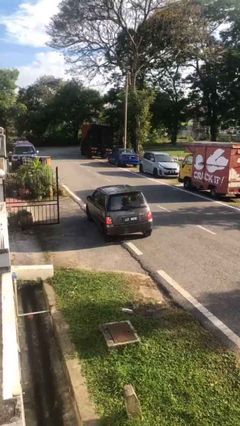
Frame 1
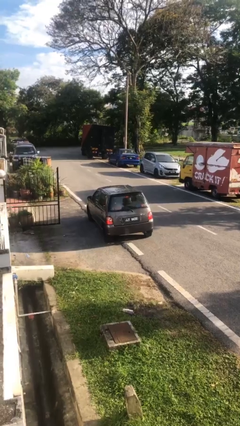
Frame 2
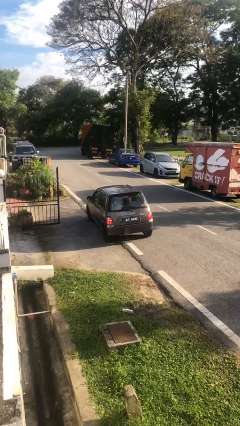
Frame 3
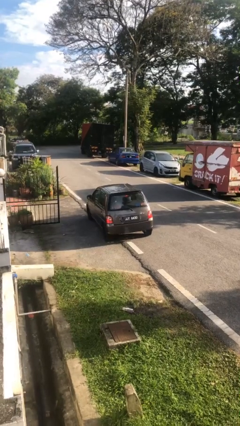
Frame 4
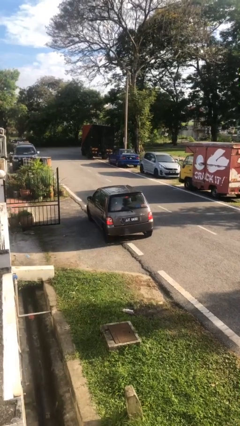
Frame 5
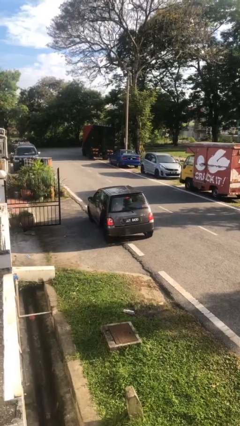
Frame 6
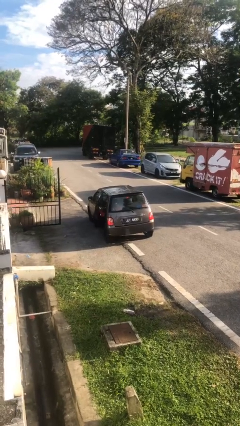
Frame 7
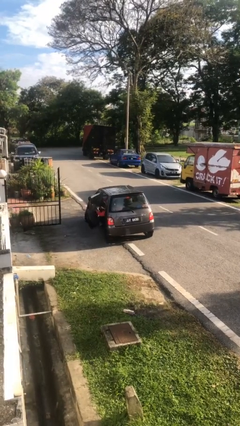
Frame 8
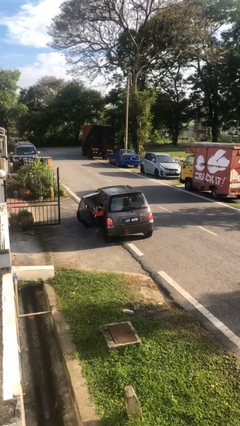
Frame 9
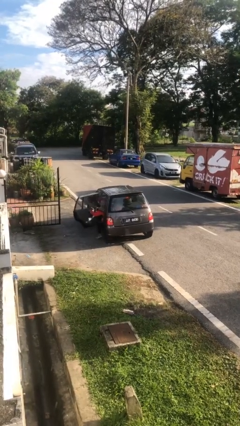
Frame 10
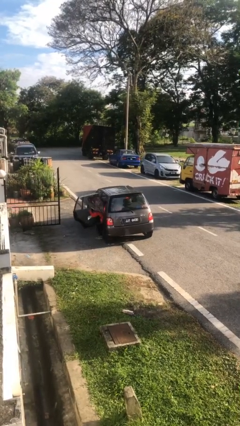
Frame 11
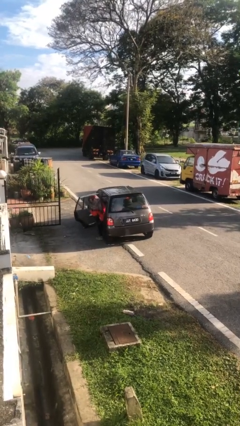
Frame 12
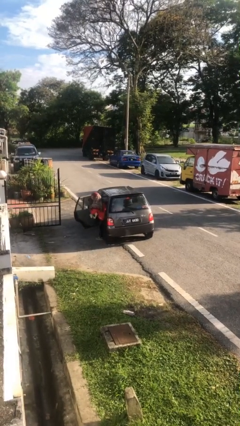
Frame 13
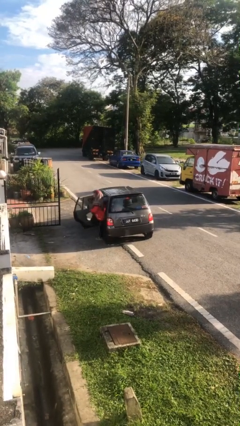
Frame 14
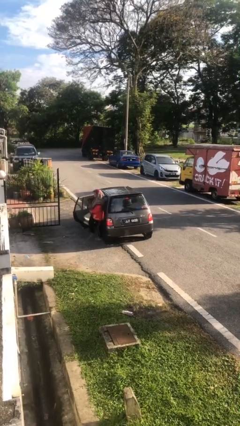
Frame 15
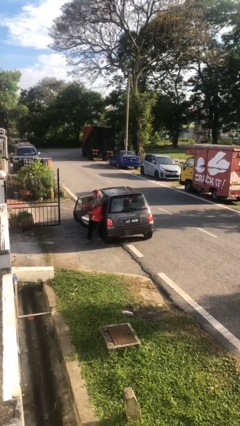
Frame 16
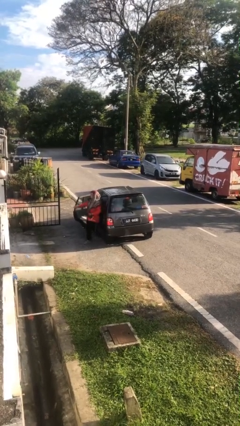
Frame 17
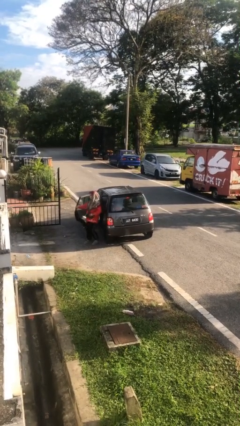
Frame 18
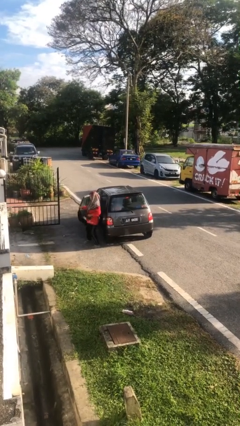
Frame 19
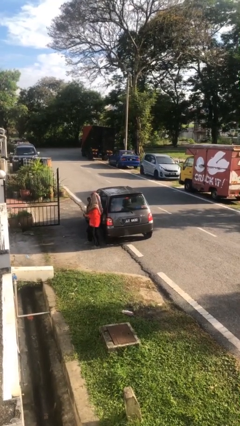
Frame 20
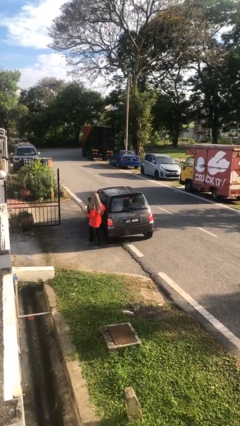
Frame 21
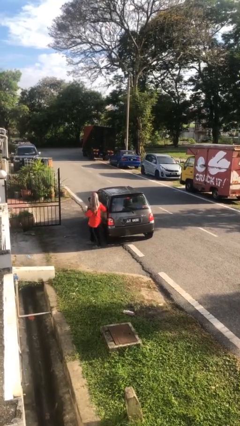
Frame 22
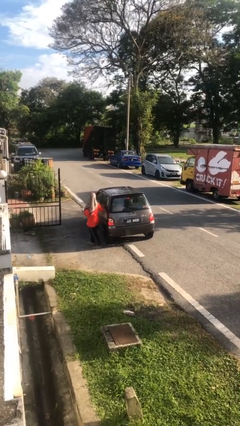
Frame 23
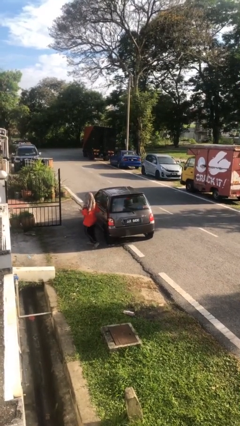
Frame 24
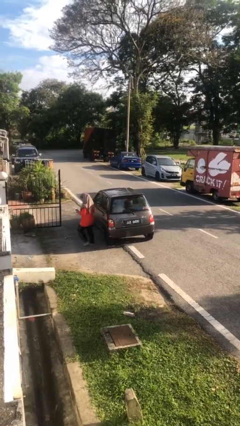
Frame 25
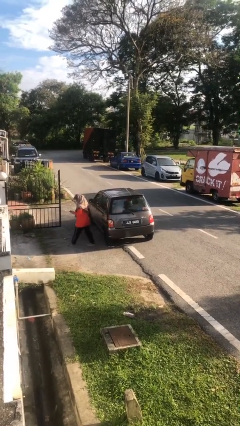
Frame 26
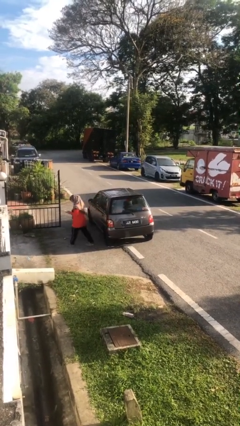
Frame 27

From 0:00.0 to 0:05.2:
car drops off person

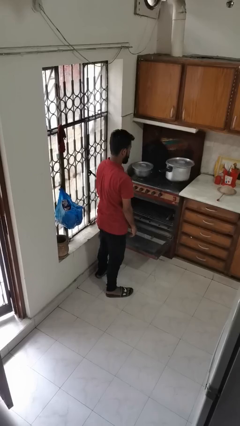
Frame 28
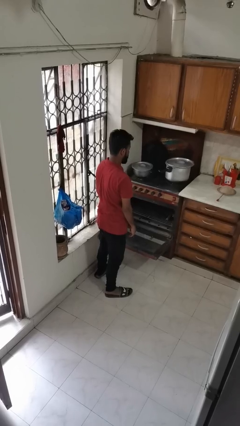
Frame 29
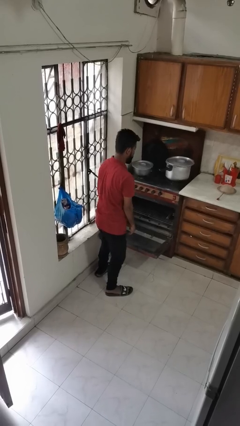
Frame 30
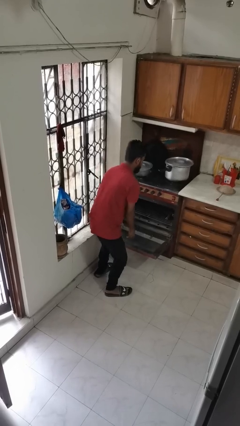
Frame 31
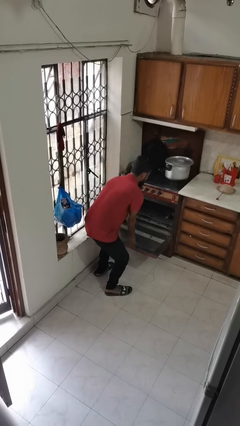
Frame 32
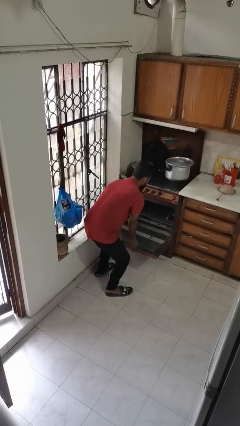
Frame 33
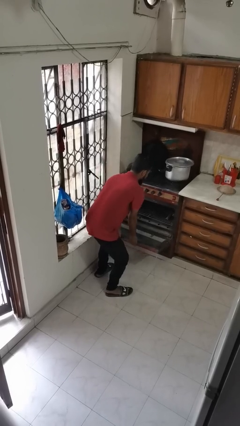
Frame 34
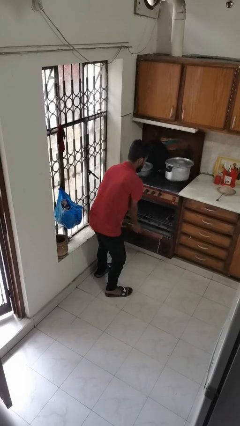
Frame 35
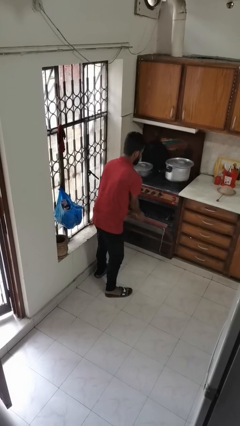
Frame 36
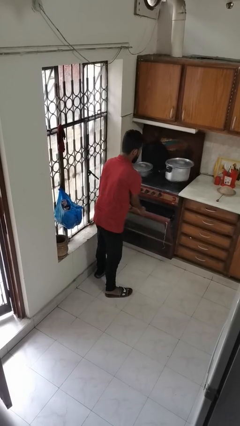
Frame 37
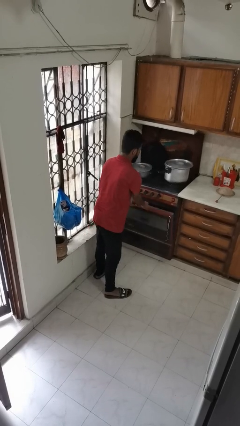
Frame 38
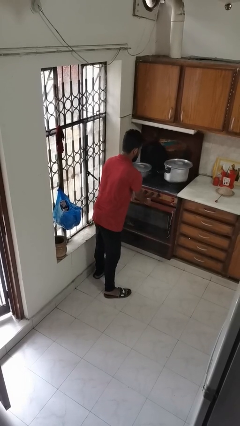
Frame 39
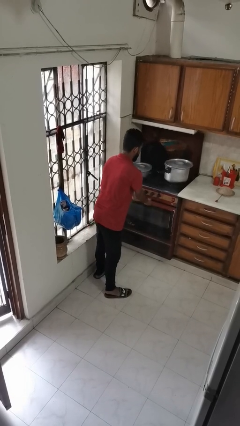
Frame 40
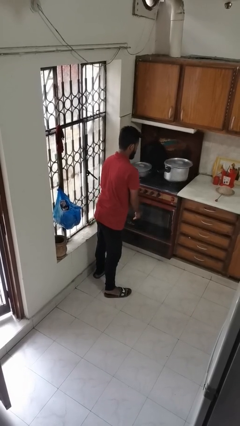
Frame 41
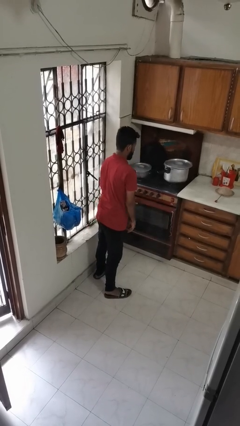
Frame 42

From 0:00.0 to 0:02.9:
person closes oven door

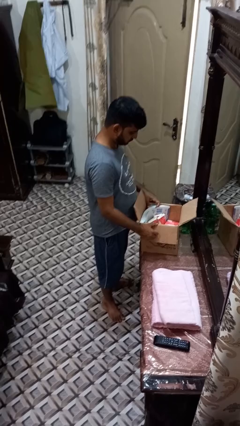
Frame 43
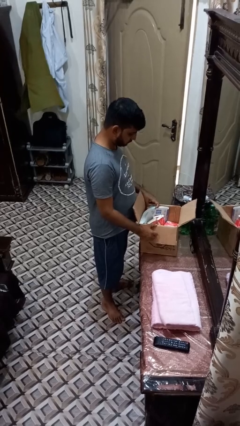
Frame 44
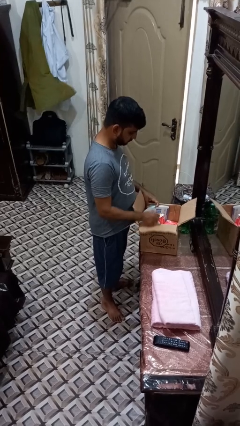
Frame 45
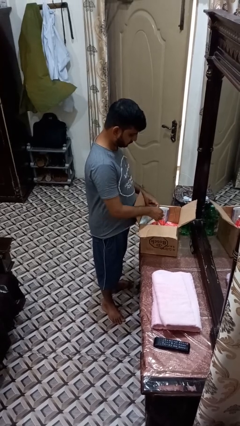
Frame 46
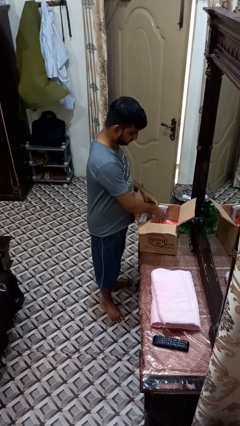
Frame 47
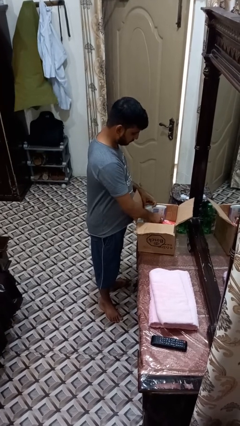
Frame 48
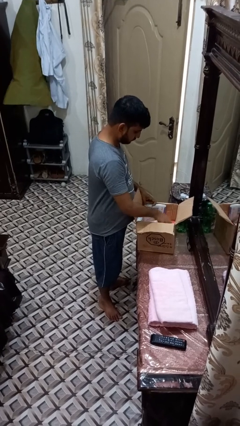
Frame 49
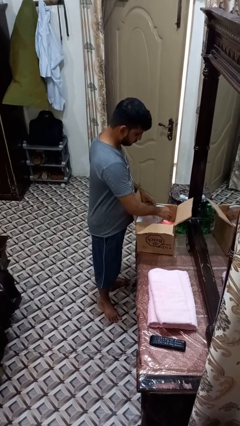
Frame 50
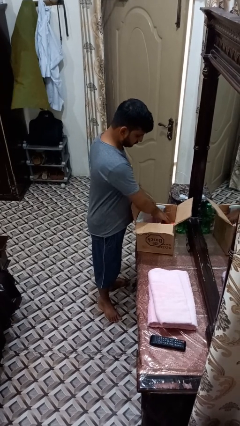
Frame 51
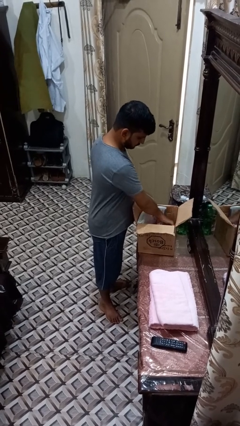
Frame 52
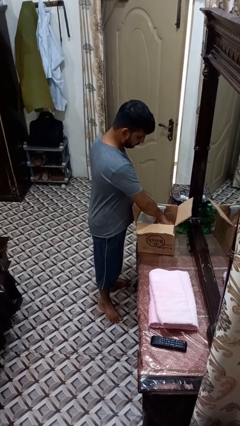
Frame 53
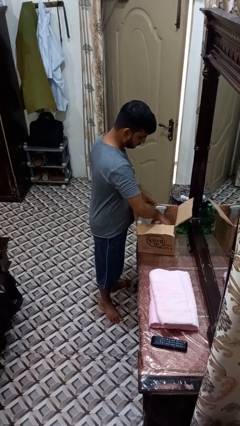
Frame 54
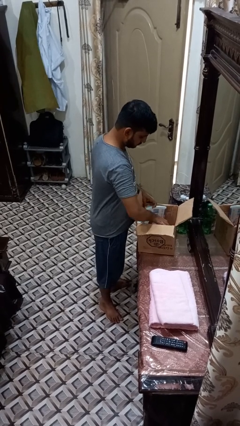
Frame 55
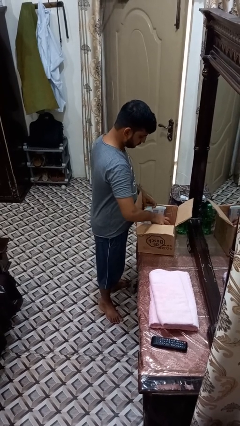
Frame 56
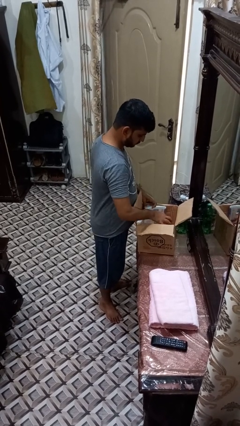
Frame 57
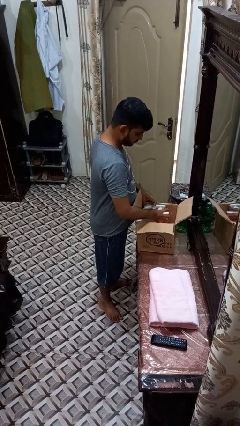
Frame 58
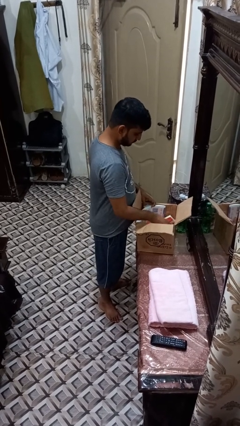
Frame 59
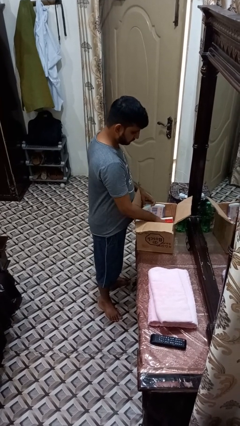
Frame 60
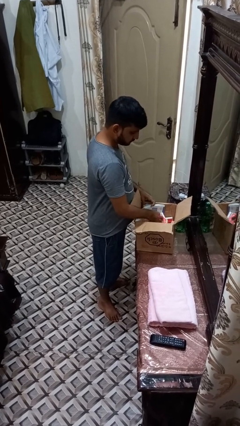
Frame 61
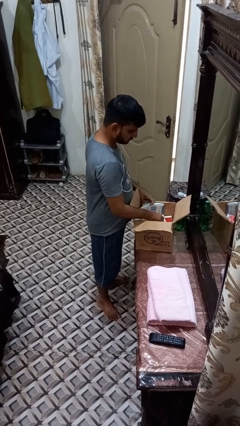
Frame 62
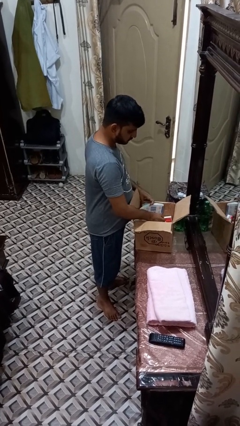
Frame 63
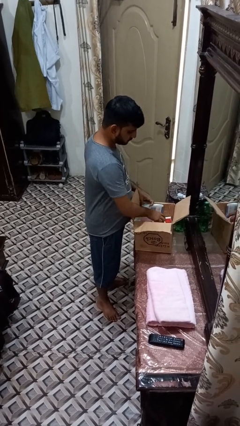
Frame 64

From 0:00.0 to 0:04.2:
person searches in box

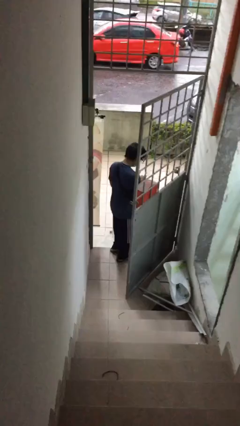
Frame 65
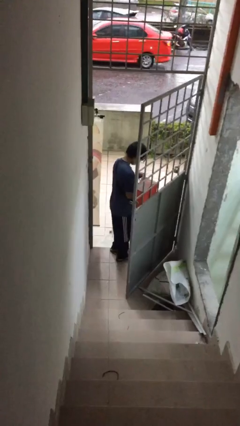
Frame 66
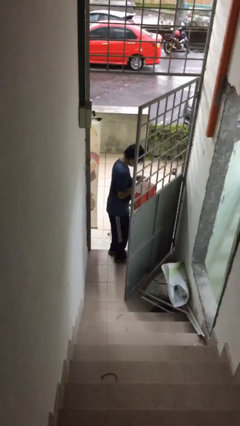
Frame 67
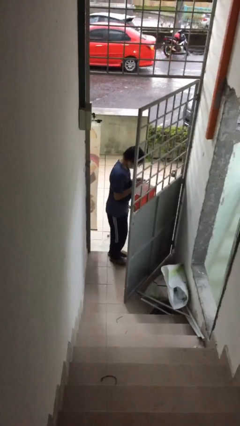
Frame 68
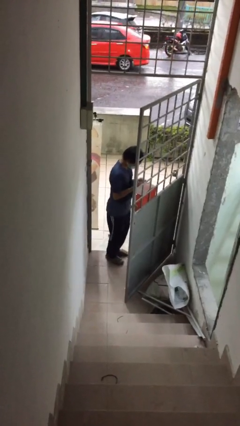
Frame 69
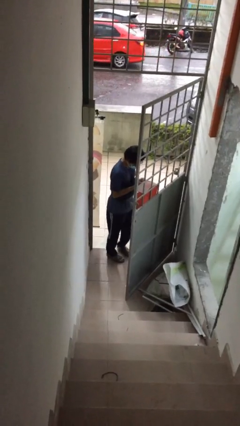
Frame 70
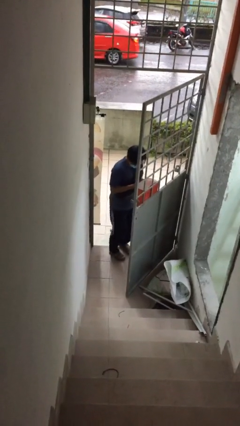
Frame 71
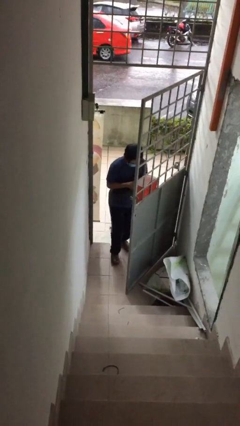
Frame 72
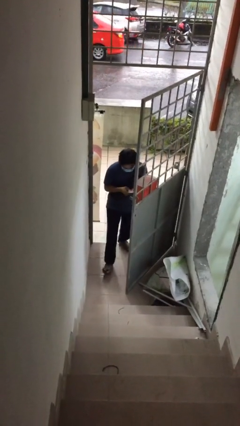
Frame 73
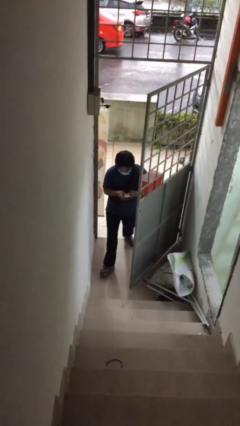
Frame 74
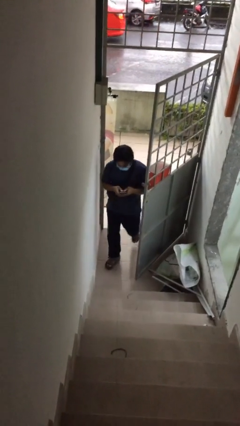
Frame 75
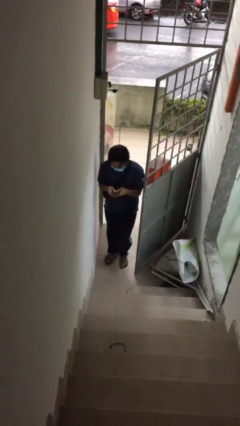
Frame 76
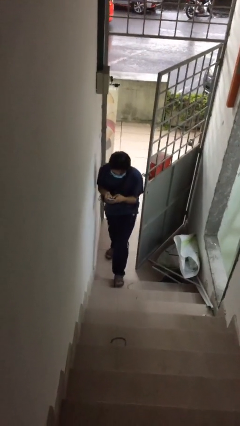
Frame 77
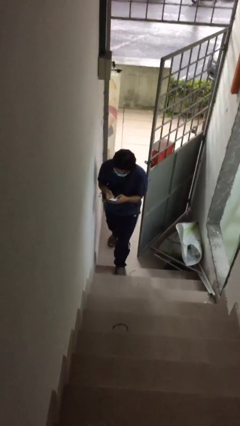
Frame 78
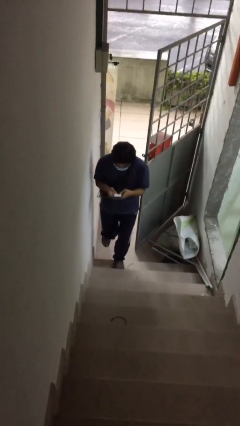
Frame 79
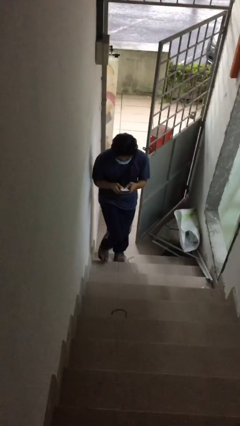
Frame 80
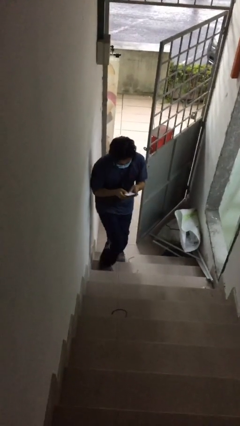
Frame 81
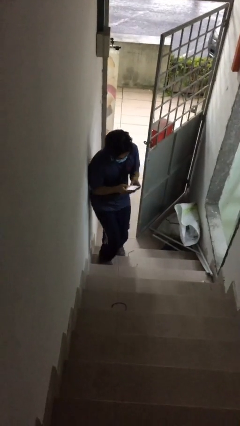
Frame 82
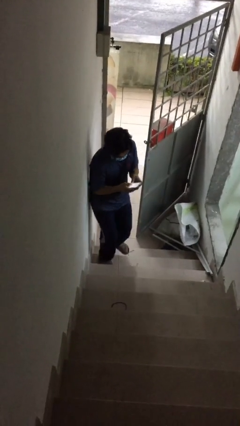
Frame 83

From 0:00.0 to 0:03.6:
person enters scene through structure

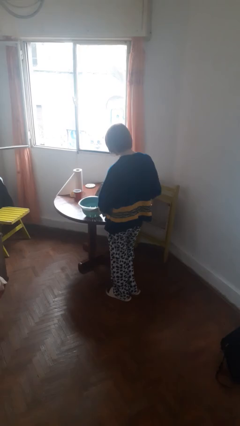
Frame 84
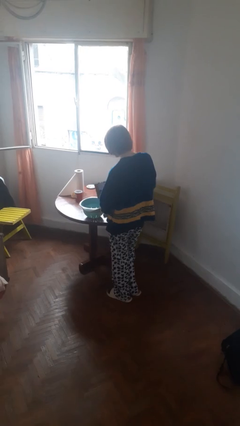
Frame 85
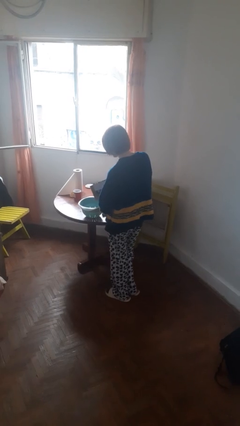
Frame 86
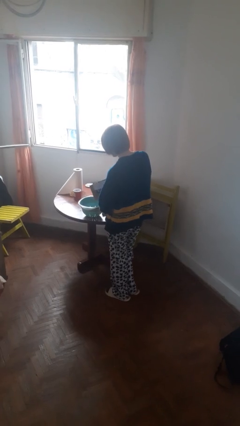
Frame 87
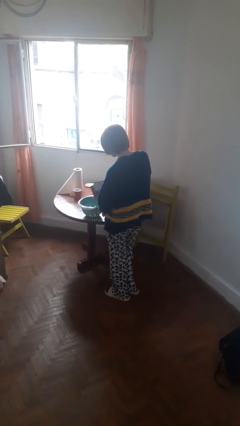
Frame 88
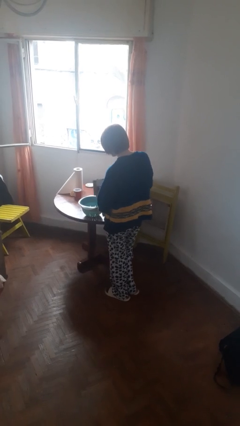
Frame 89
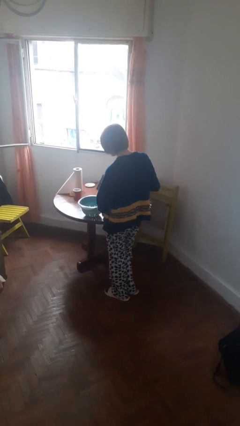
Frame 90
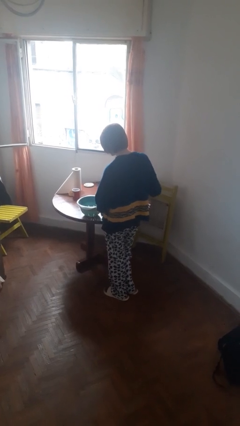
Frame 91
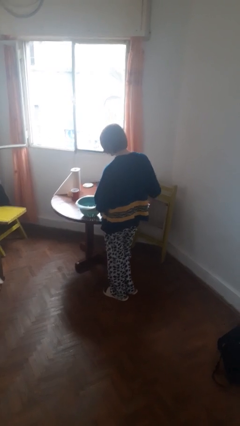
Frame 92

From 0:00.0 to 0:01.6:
person pours into bowl
